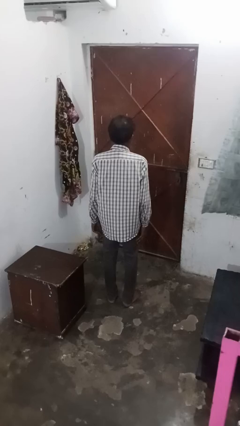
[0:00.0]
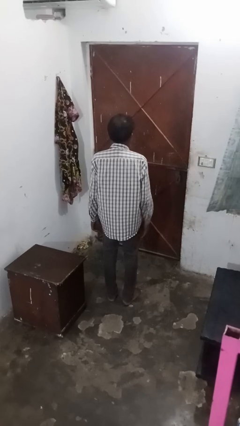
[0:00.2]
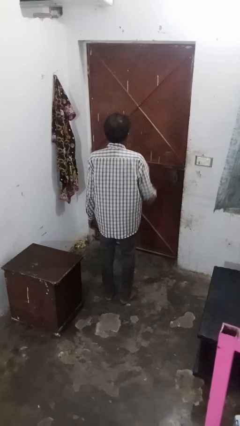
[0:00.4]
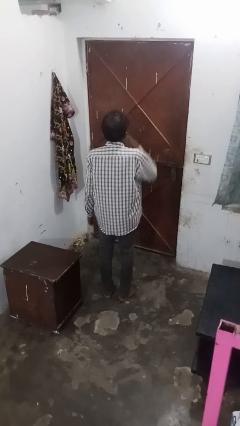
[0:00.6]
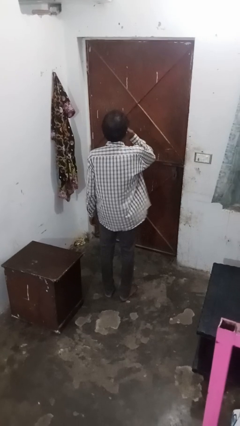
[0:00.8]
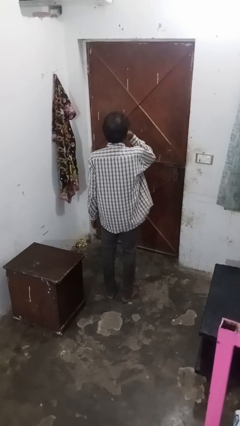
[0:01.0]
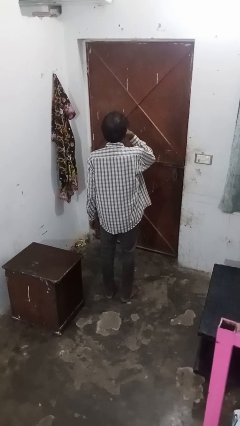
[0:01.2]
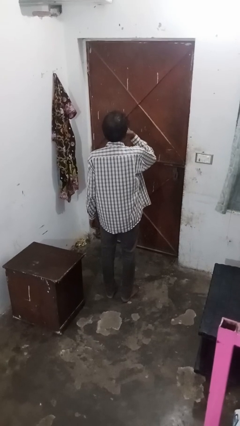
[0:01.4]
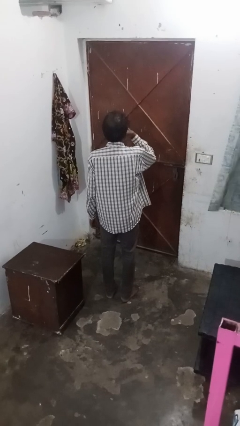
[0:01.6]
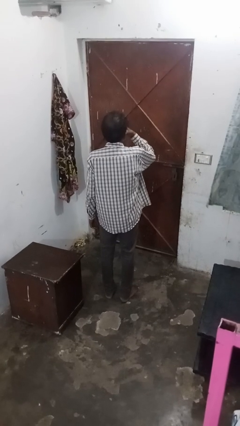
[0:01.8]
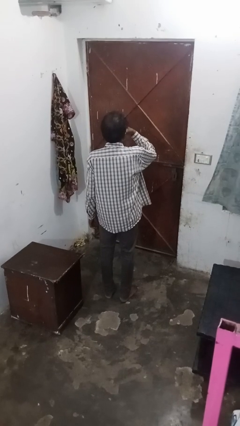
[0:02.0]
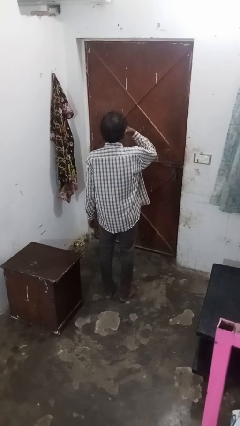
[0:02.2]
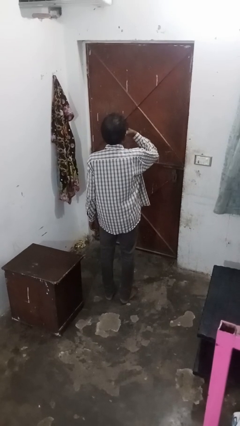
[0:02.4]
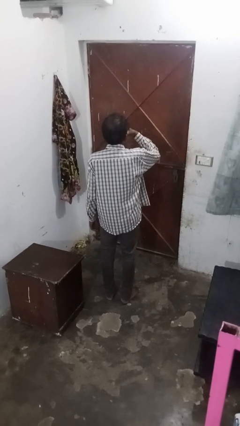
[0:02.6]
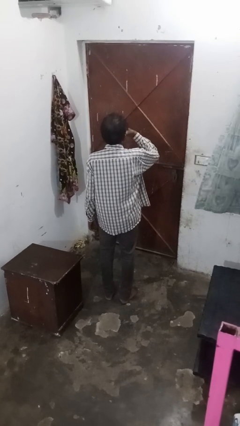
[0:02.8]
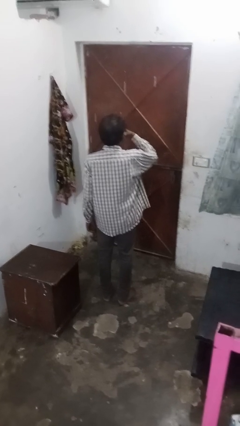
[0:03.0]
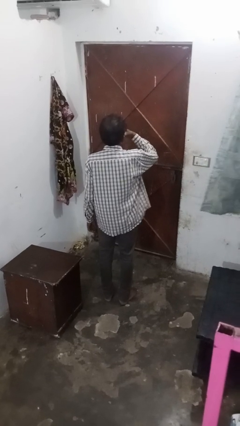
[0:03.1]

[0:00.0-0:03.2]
person strokes chin

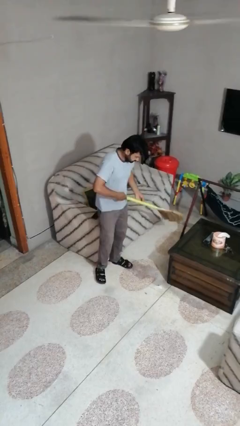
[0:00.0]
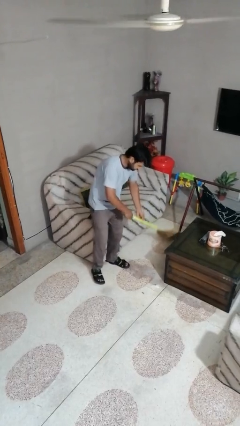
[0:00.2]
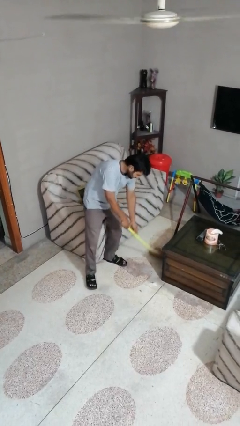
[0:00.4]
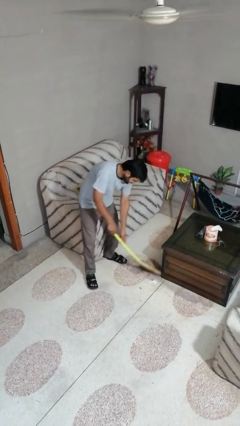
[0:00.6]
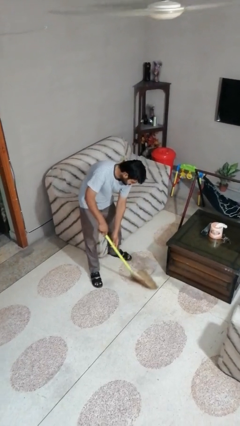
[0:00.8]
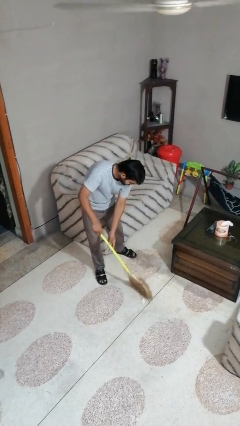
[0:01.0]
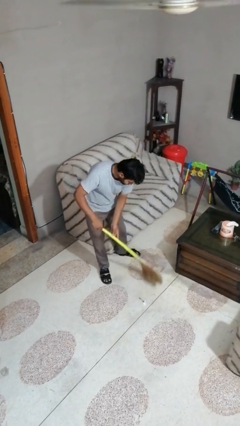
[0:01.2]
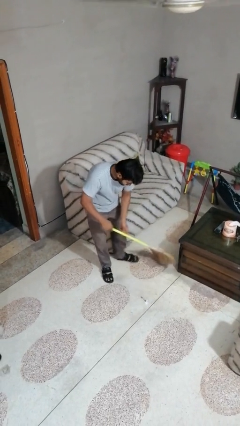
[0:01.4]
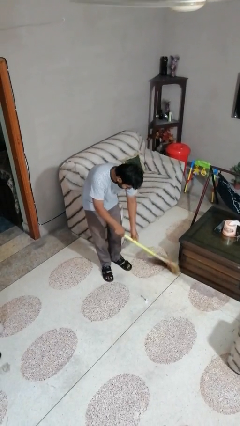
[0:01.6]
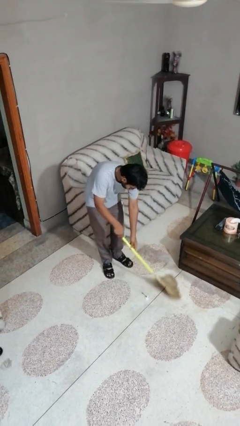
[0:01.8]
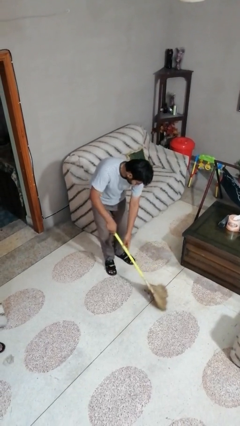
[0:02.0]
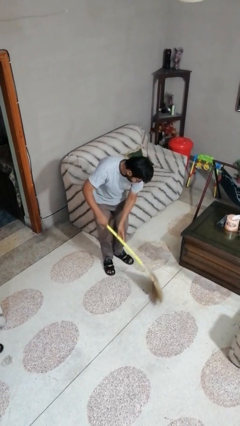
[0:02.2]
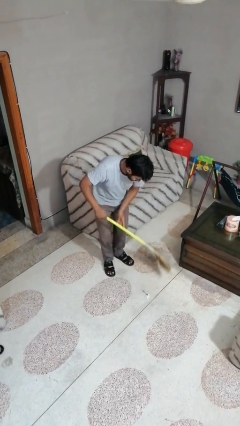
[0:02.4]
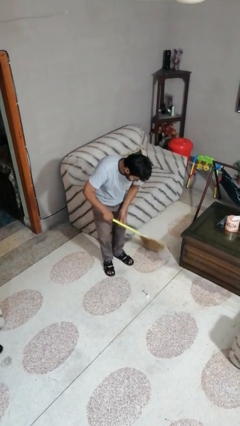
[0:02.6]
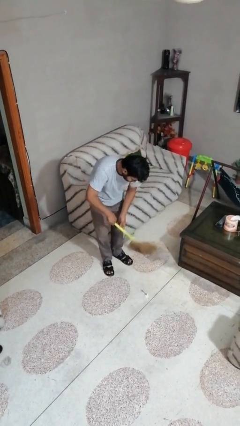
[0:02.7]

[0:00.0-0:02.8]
person sweeps floor

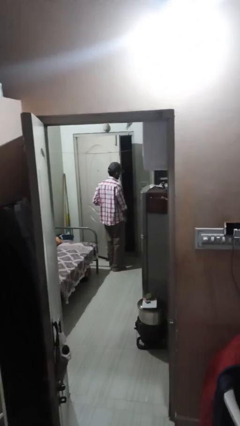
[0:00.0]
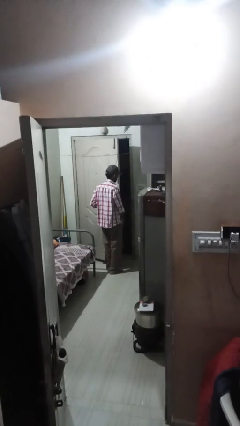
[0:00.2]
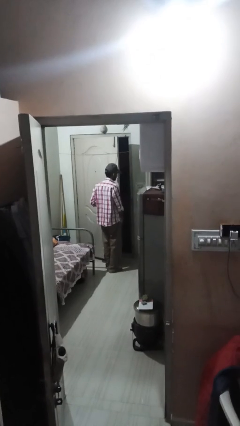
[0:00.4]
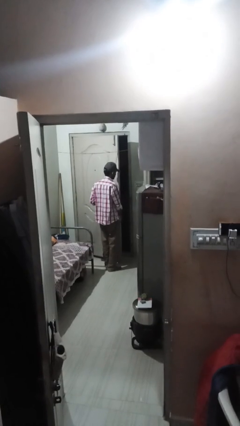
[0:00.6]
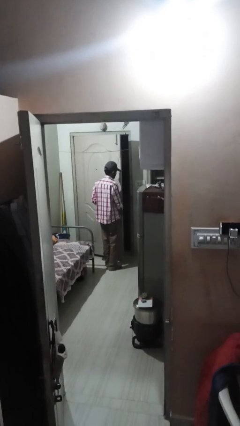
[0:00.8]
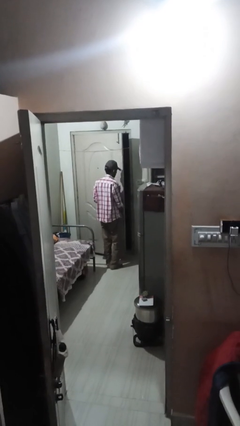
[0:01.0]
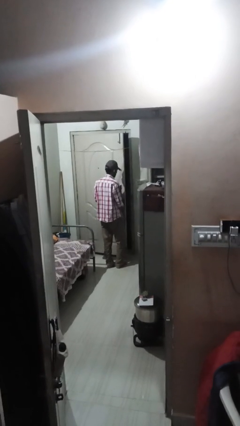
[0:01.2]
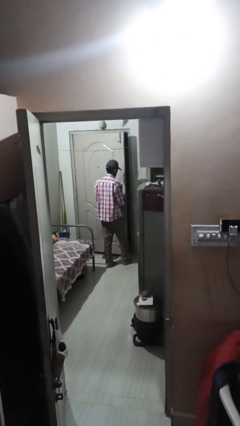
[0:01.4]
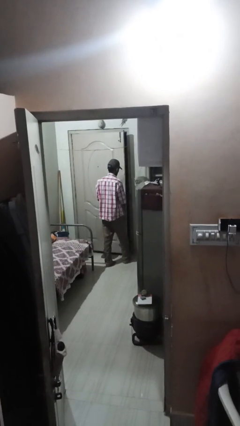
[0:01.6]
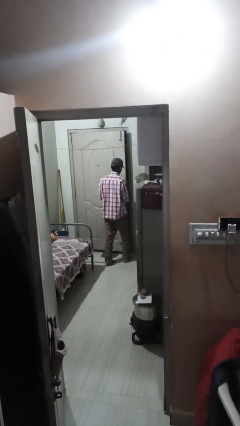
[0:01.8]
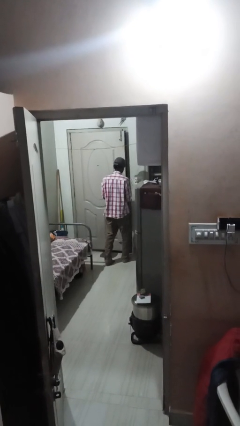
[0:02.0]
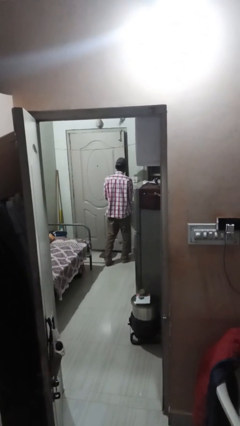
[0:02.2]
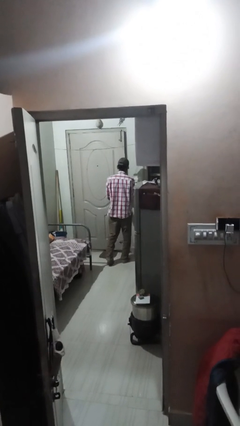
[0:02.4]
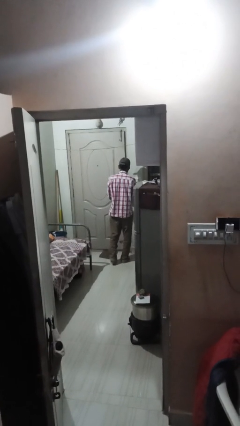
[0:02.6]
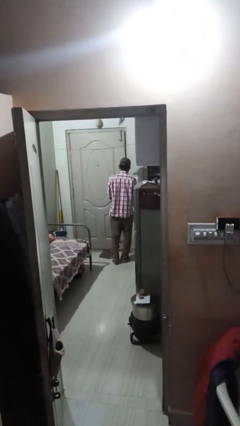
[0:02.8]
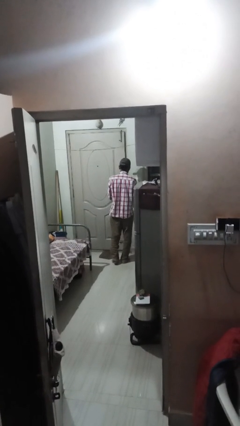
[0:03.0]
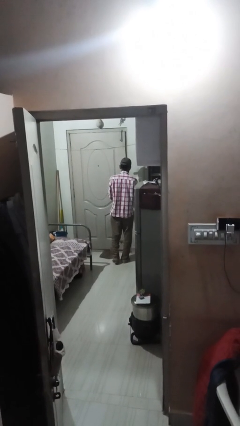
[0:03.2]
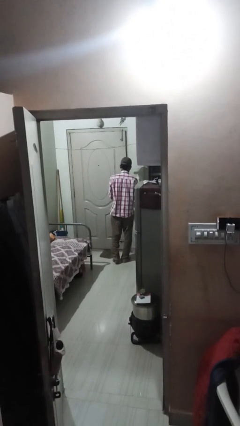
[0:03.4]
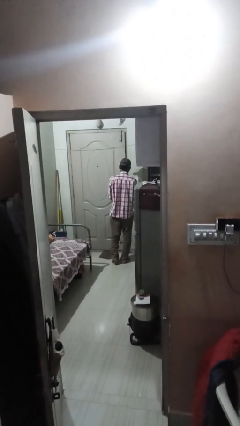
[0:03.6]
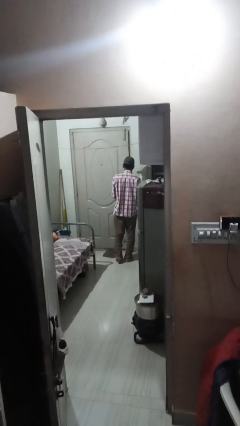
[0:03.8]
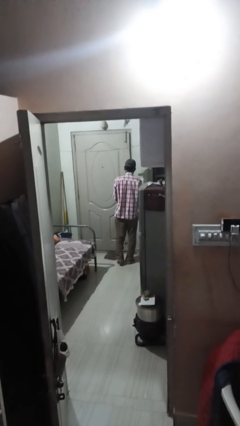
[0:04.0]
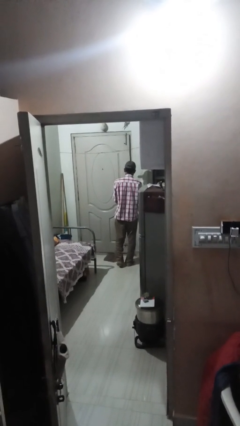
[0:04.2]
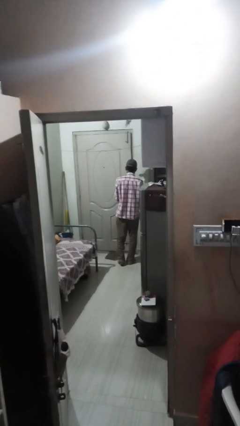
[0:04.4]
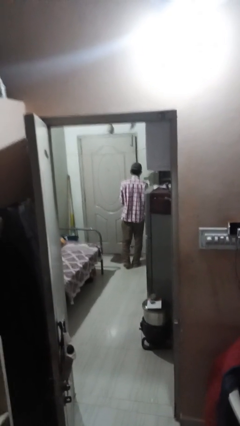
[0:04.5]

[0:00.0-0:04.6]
person closes facility door

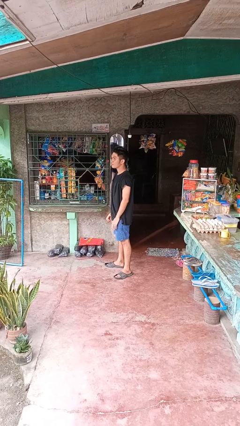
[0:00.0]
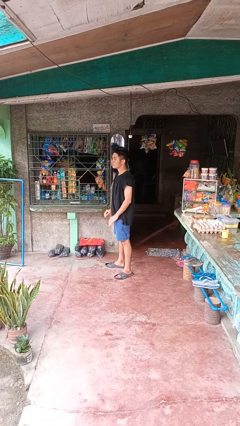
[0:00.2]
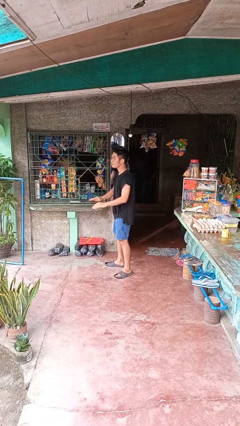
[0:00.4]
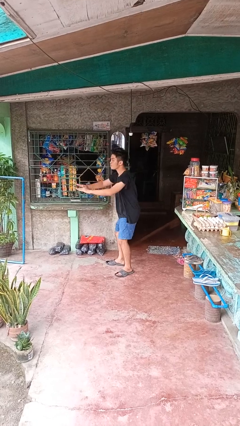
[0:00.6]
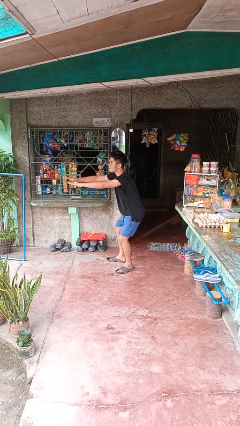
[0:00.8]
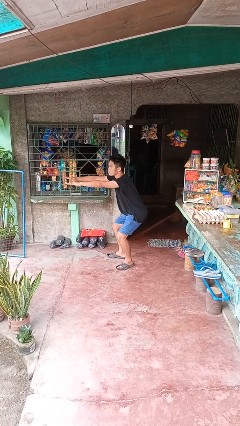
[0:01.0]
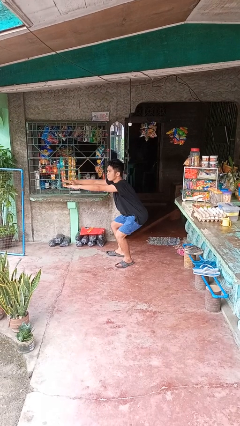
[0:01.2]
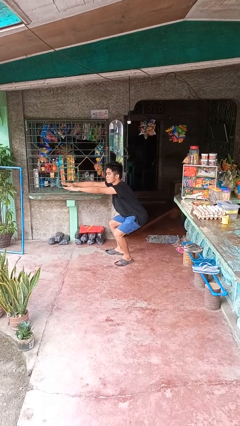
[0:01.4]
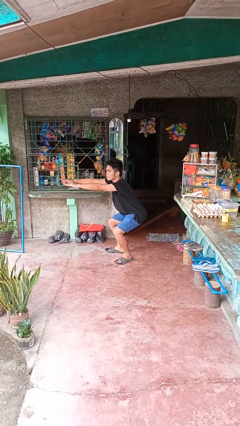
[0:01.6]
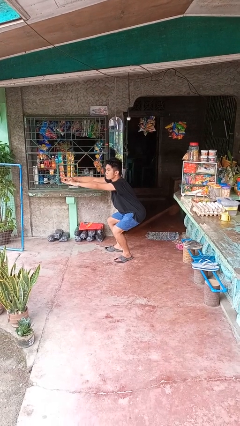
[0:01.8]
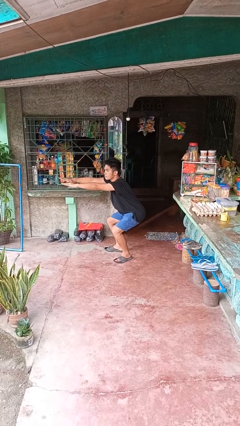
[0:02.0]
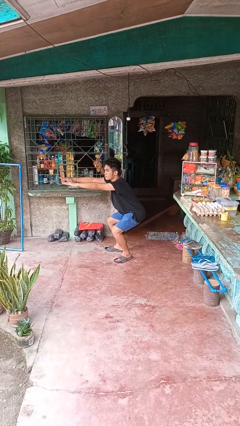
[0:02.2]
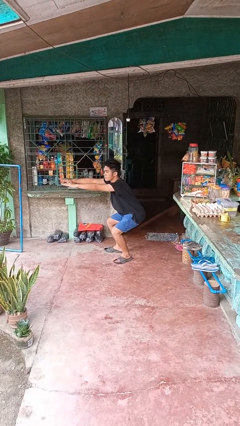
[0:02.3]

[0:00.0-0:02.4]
person squats

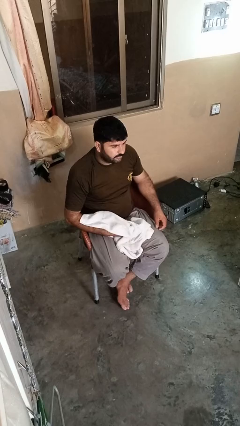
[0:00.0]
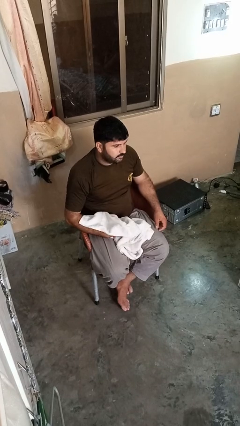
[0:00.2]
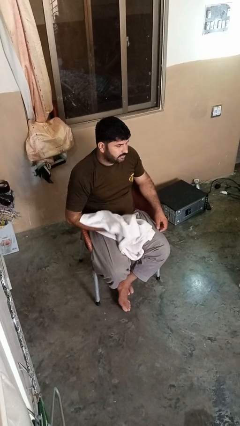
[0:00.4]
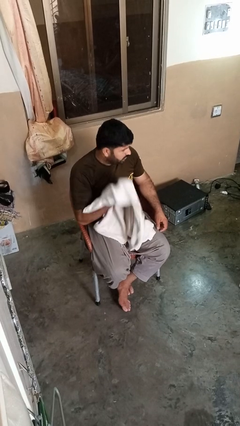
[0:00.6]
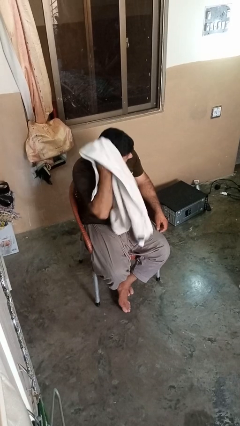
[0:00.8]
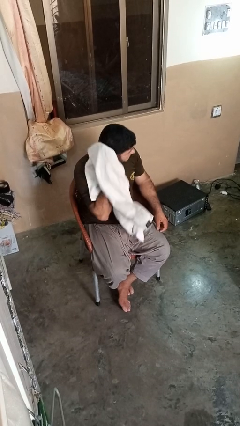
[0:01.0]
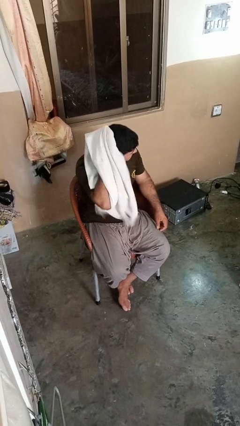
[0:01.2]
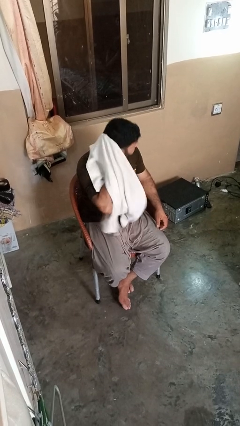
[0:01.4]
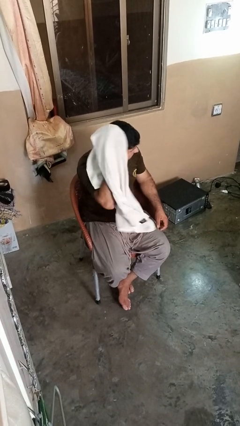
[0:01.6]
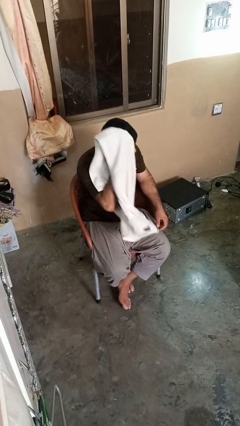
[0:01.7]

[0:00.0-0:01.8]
person dries hair with towel

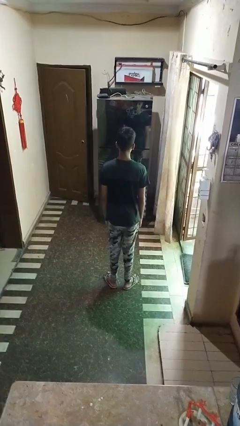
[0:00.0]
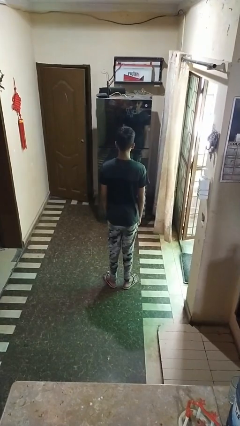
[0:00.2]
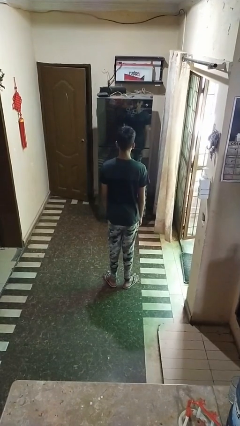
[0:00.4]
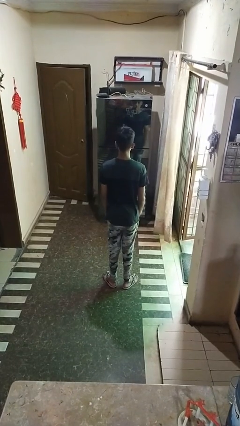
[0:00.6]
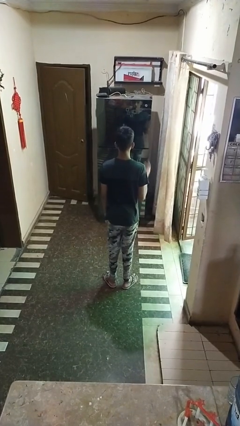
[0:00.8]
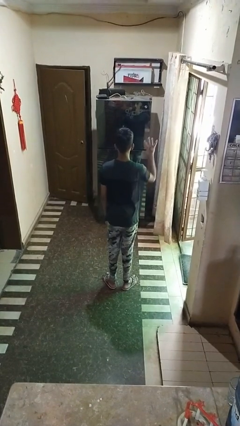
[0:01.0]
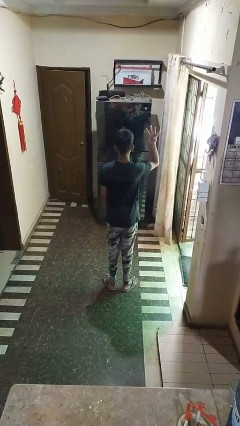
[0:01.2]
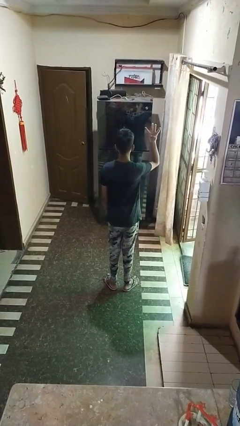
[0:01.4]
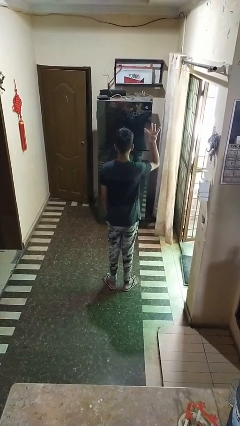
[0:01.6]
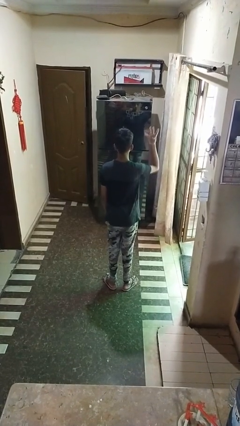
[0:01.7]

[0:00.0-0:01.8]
person gestures number four

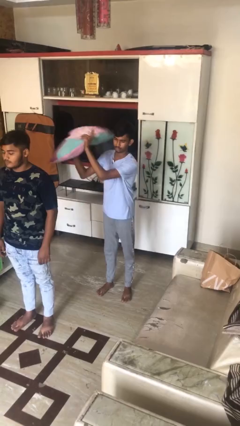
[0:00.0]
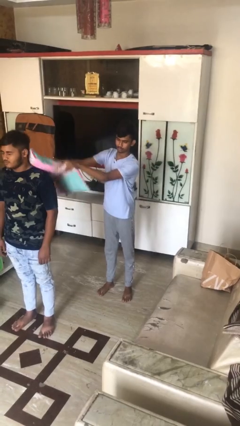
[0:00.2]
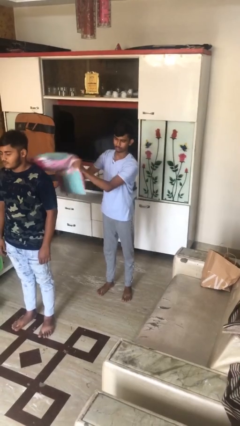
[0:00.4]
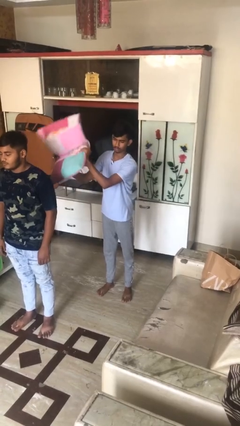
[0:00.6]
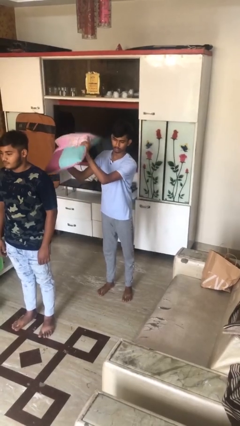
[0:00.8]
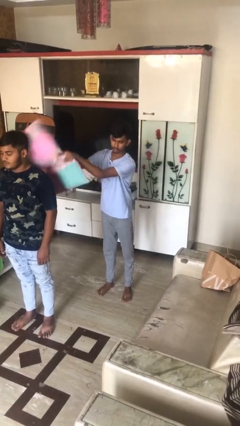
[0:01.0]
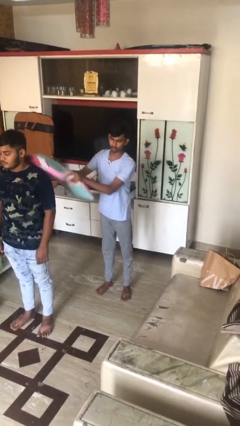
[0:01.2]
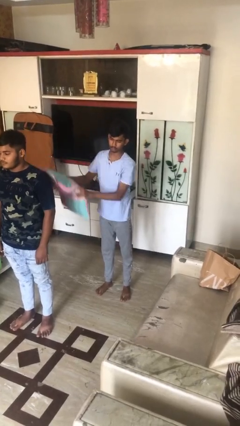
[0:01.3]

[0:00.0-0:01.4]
person hits person with pillow
